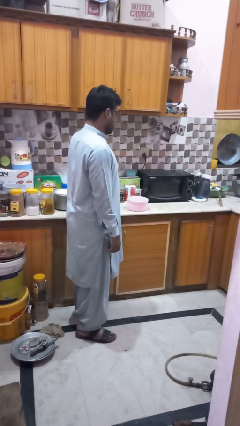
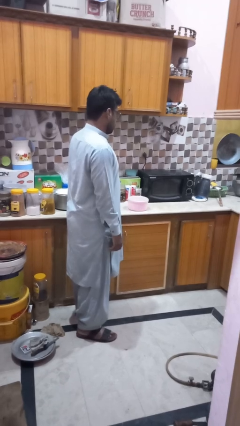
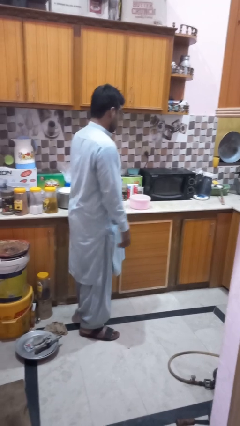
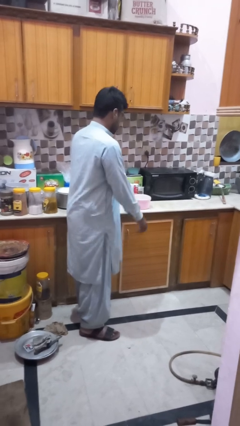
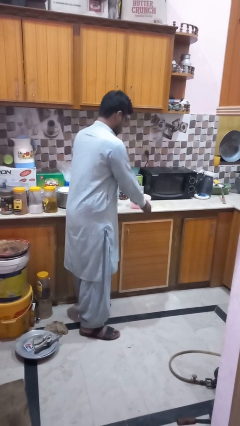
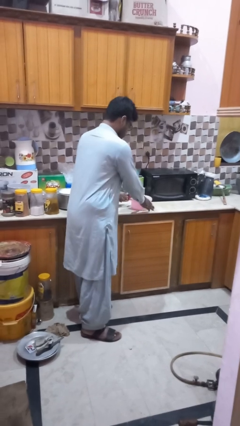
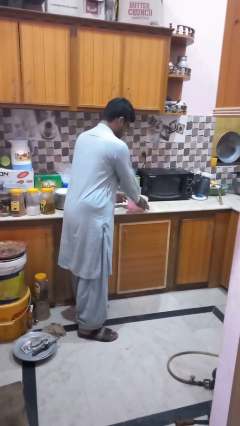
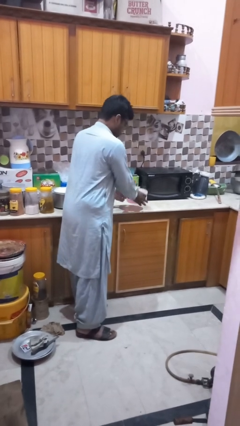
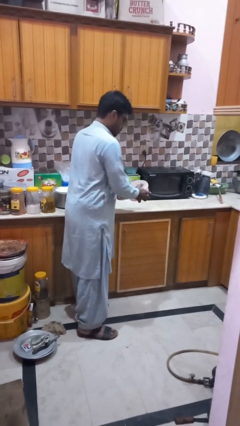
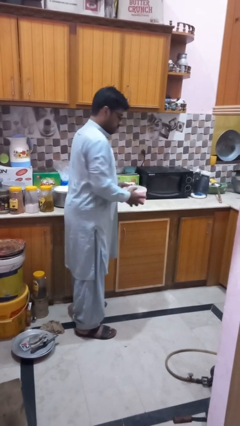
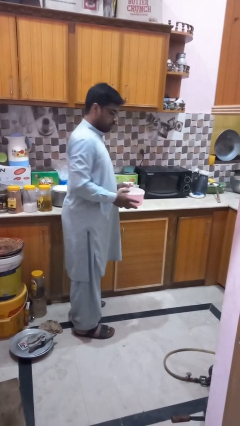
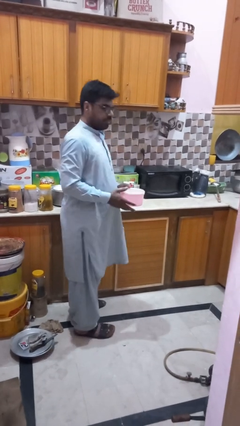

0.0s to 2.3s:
person picks up object from countertop

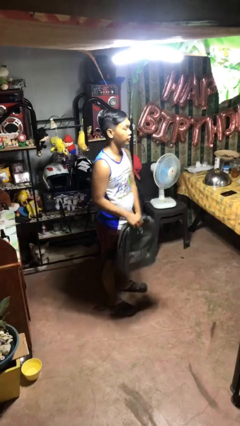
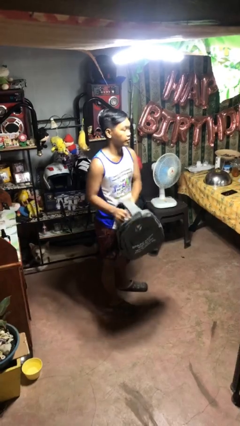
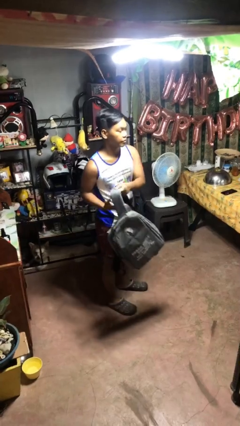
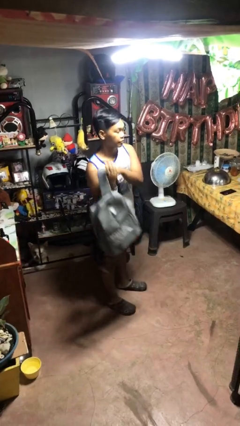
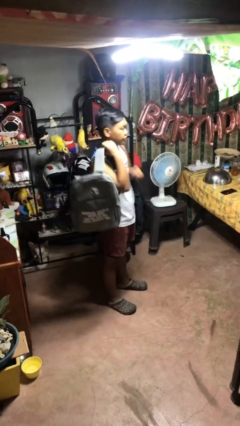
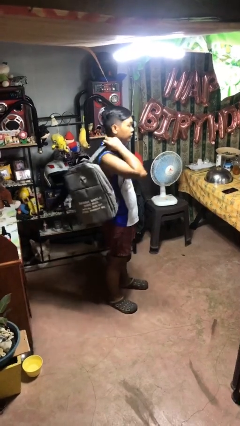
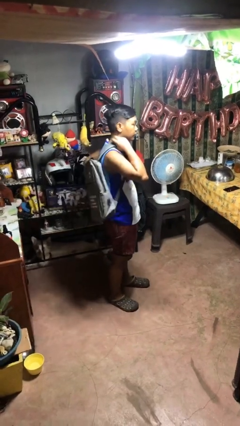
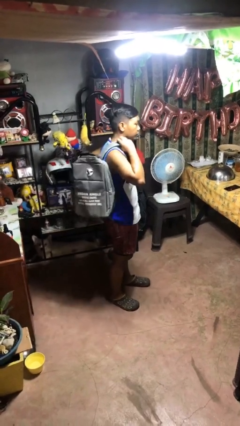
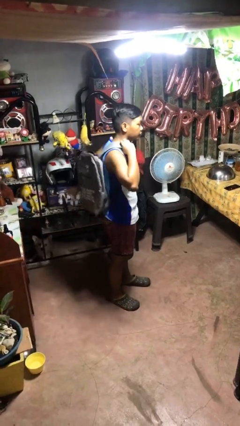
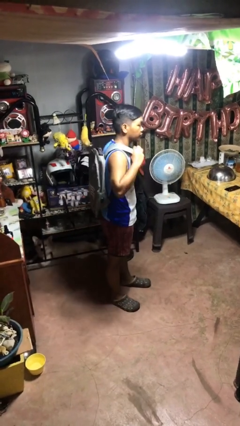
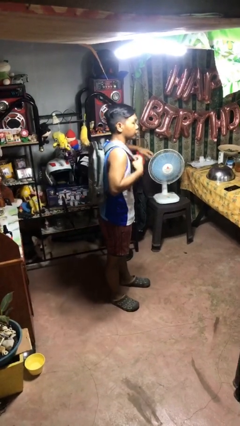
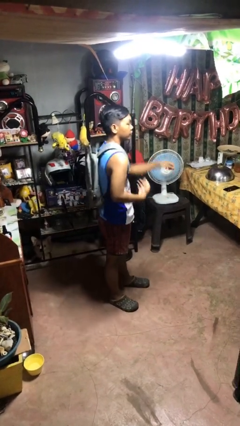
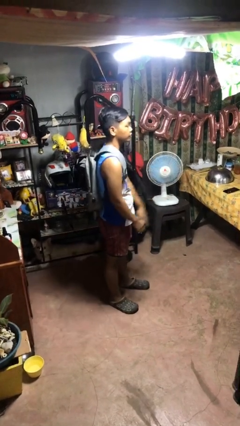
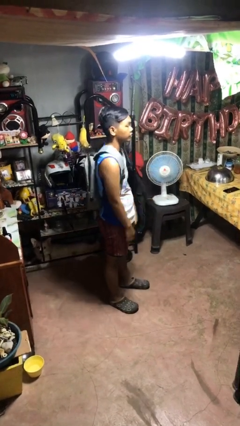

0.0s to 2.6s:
person puts on backpack

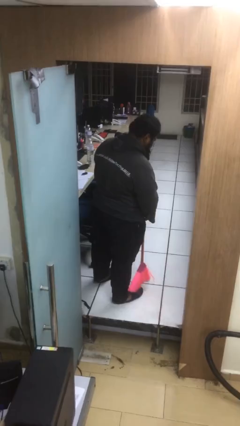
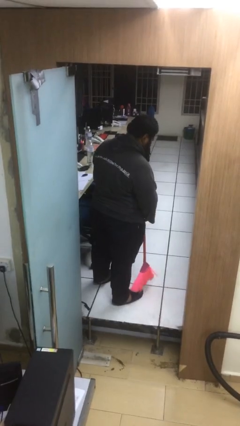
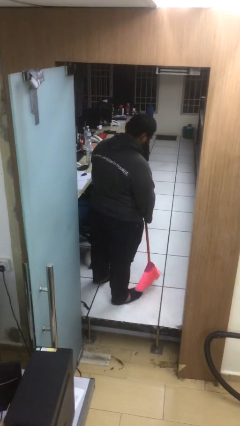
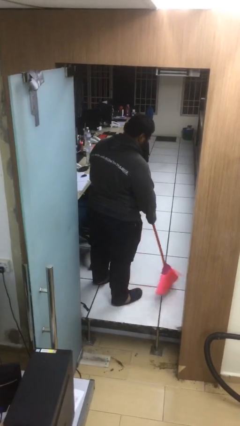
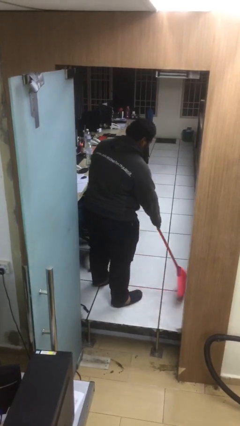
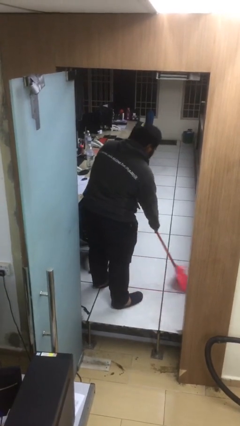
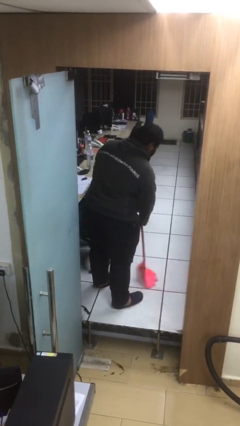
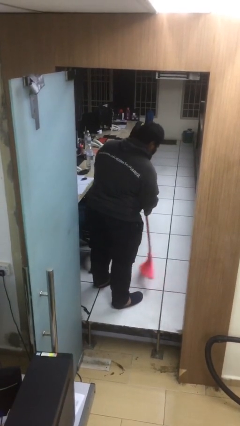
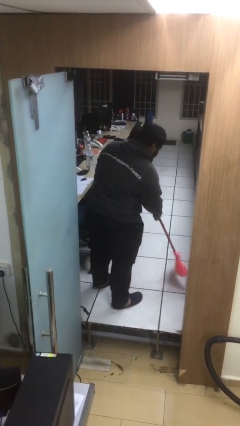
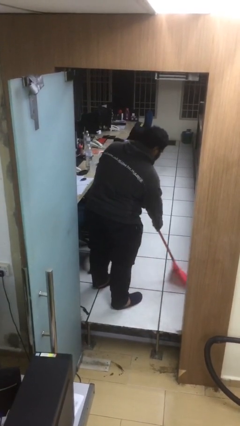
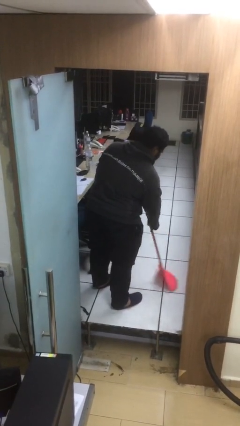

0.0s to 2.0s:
person sweeps floor

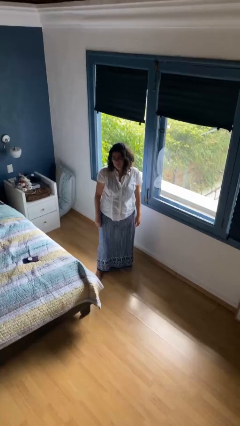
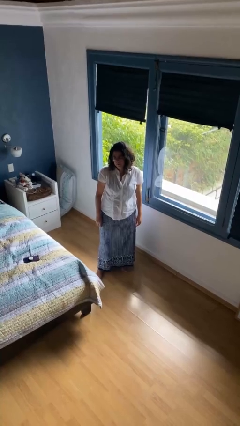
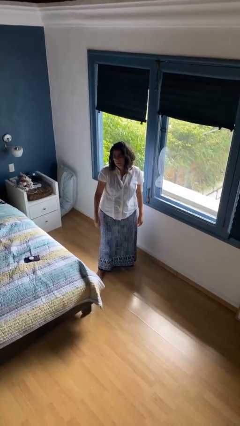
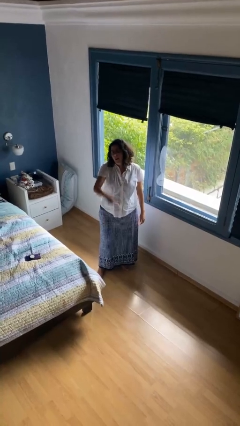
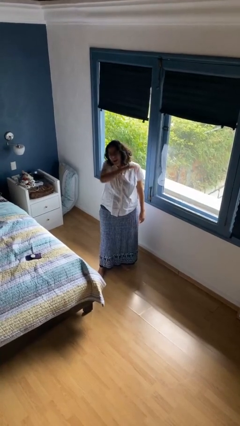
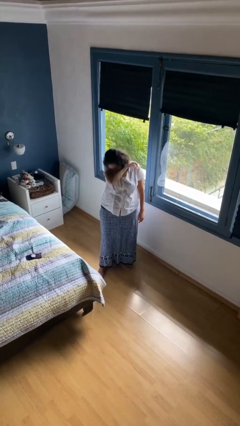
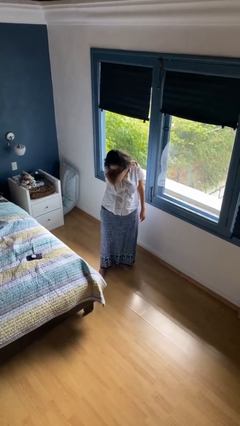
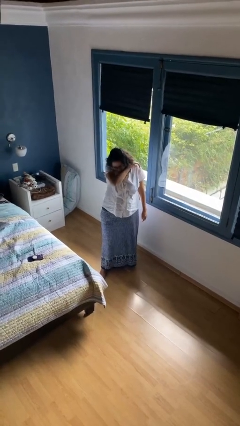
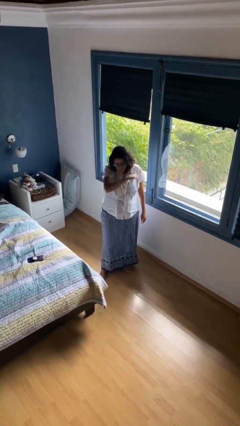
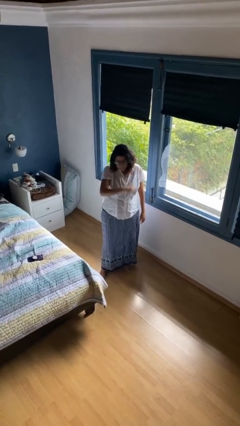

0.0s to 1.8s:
person sneezes into arm

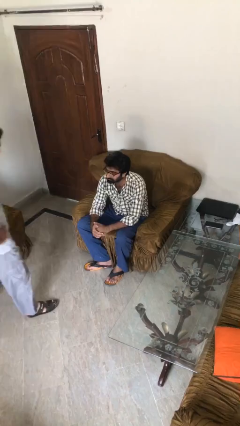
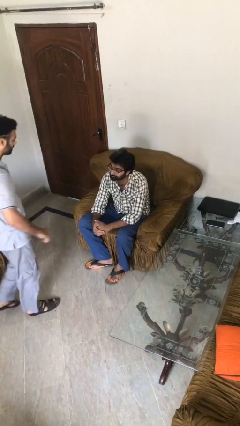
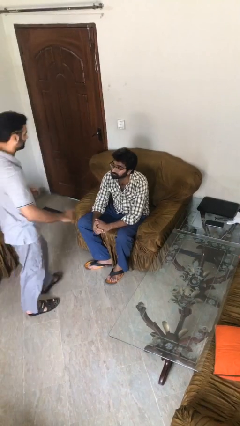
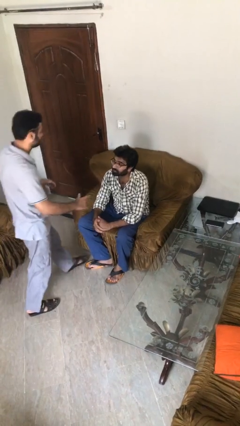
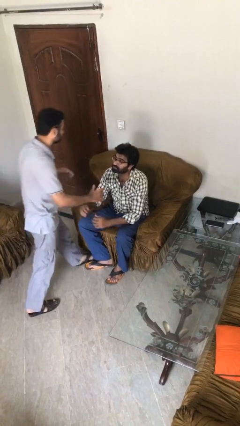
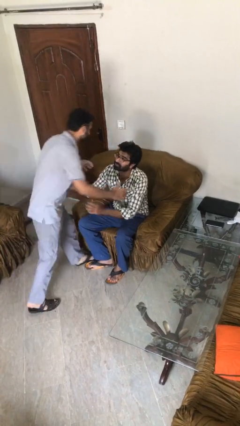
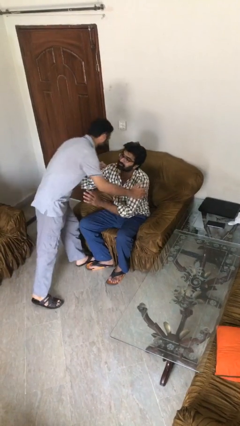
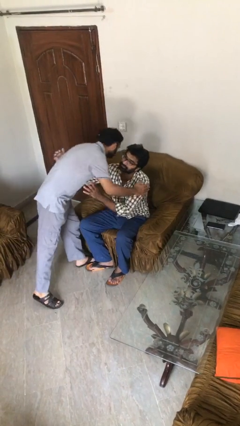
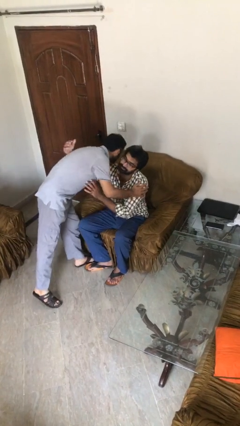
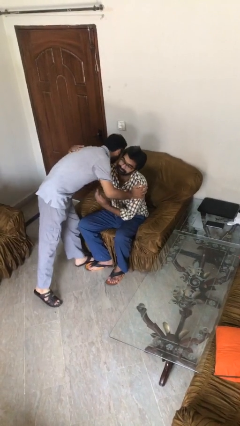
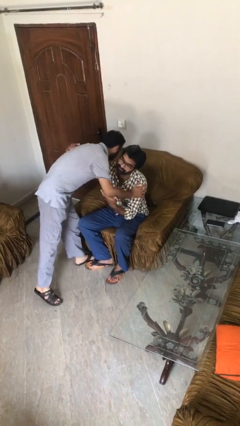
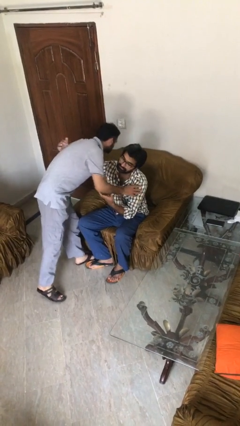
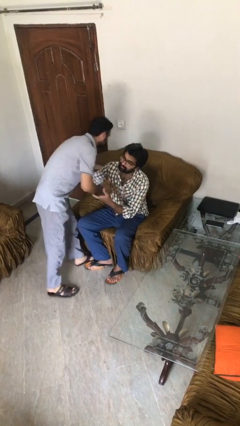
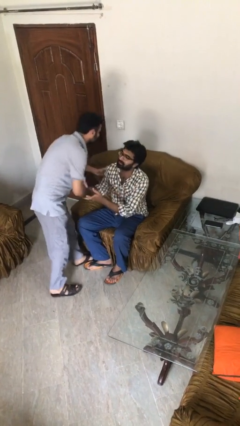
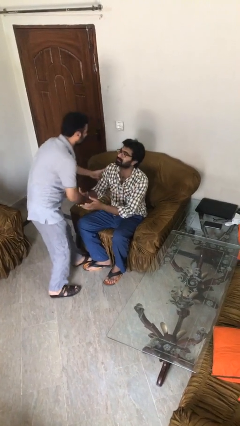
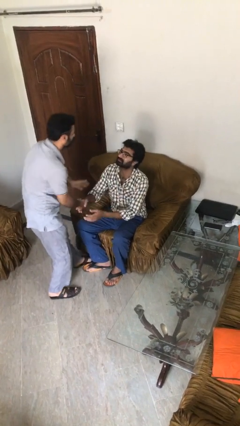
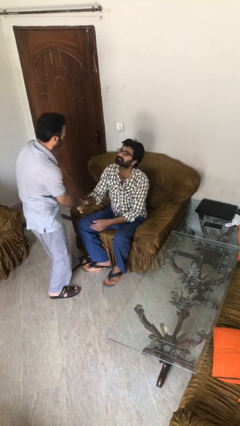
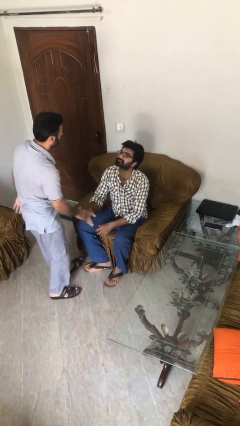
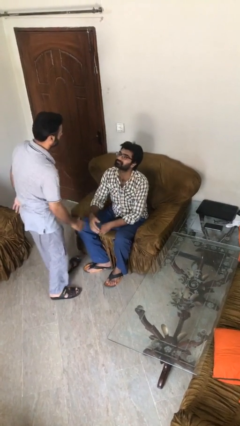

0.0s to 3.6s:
person embraces person

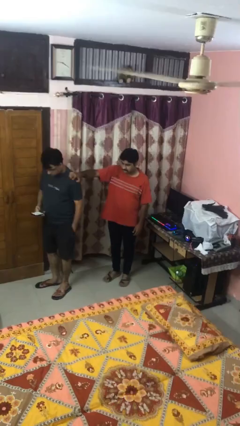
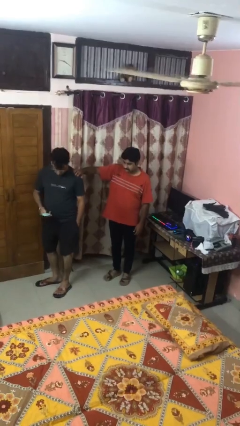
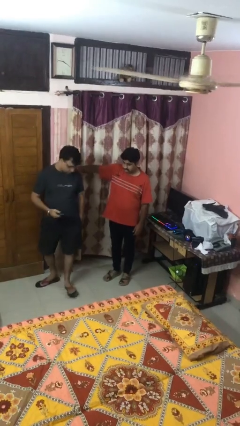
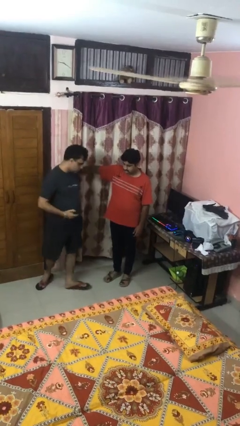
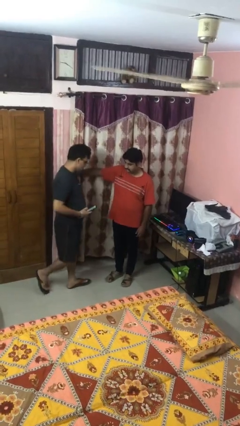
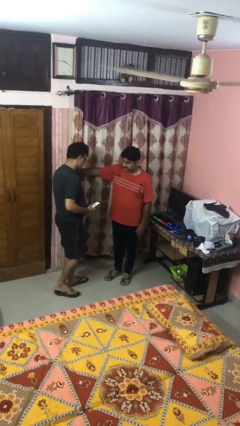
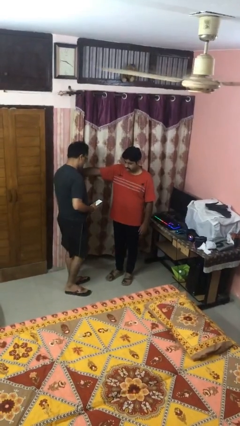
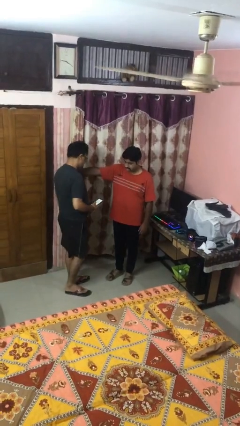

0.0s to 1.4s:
person spins person around

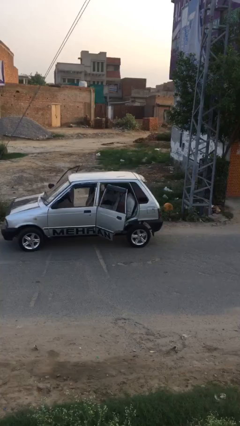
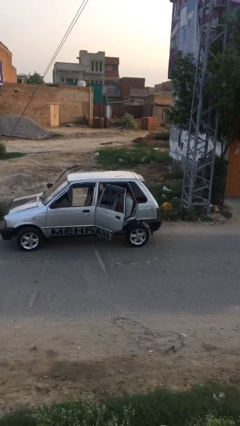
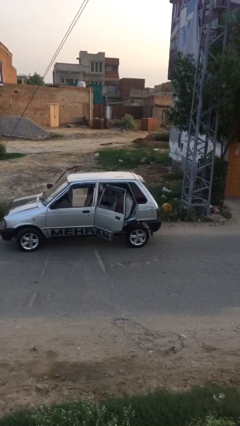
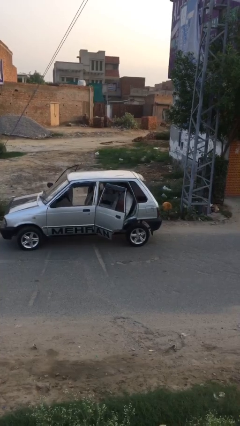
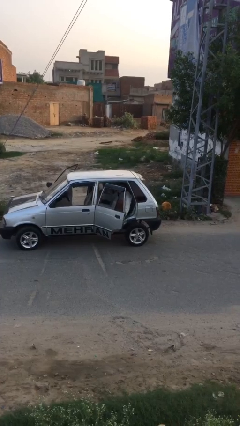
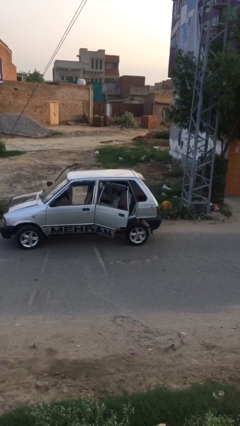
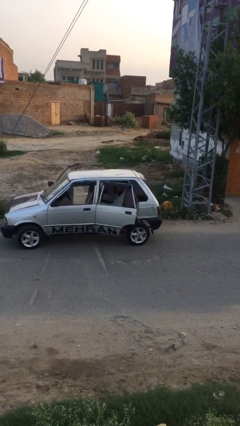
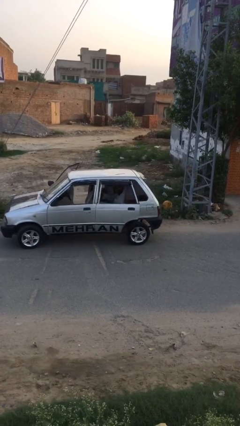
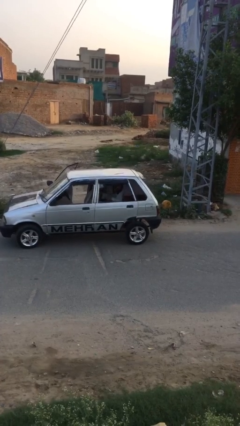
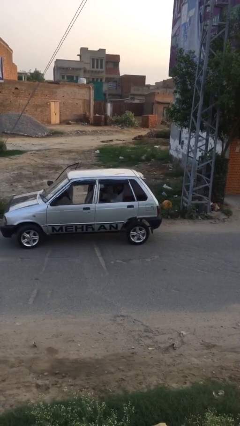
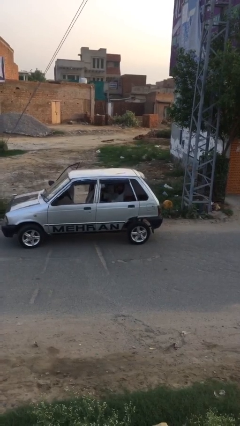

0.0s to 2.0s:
person closes car door

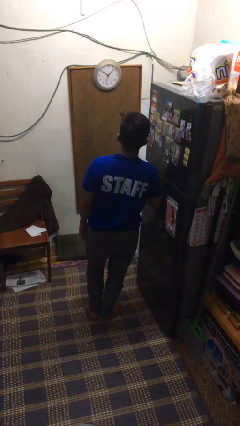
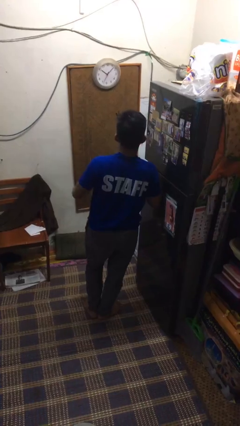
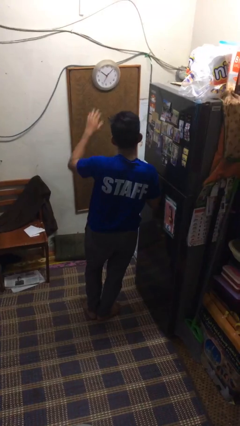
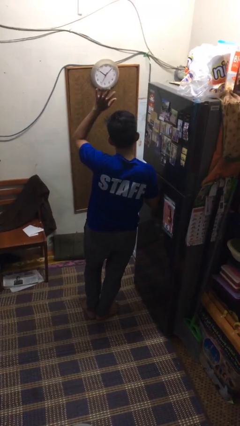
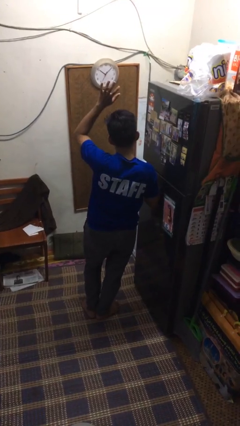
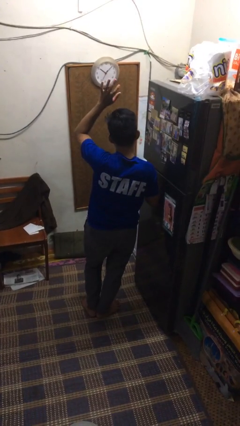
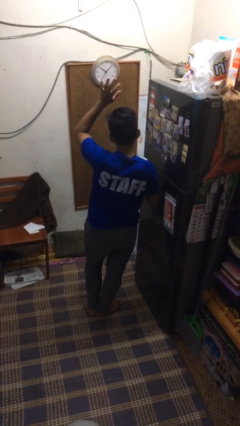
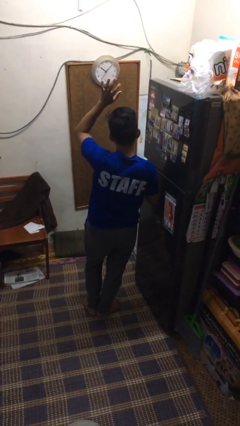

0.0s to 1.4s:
person gestures raise hand
